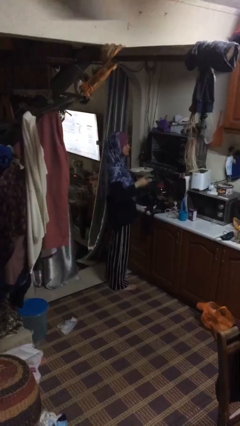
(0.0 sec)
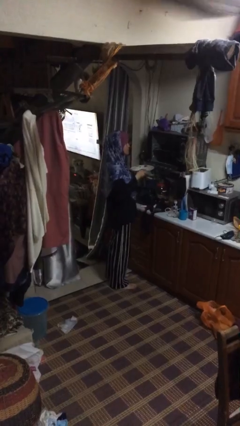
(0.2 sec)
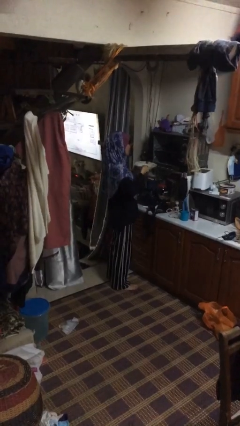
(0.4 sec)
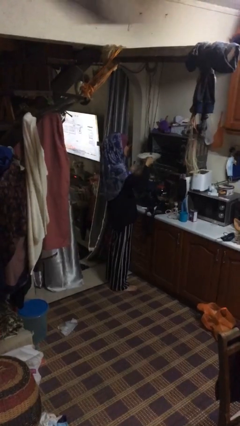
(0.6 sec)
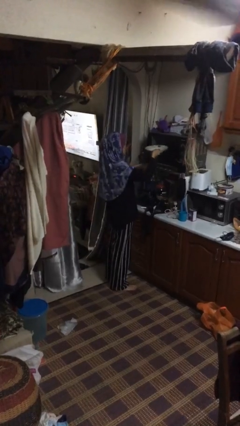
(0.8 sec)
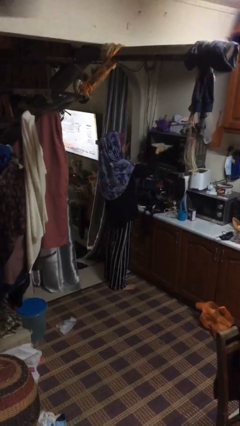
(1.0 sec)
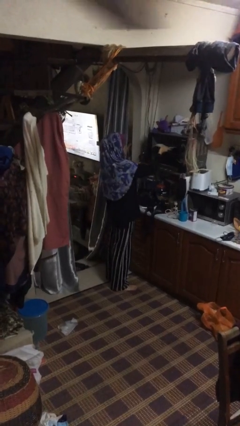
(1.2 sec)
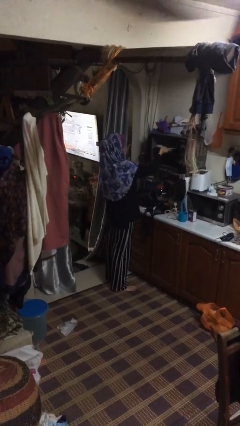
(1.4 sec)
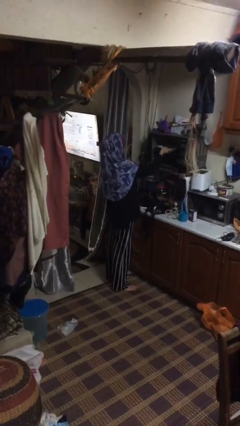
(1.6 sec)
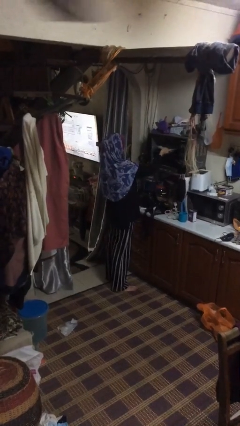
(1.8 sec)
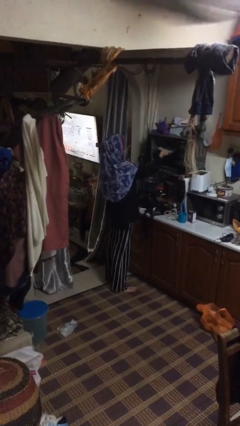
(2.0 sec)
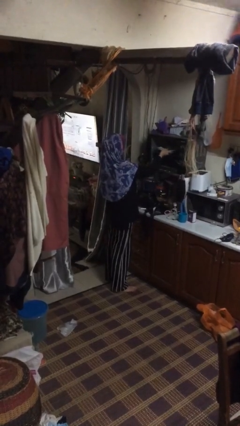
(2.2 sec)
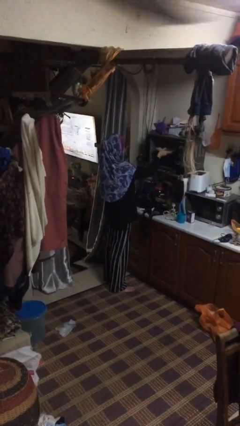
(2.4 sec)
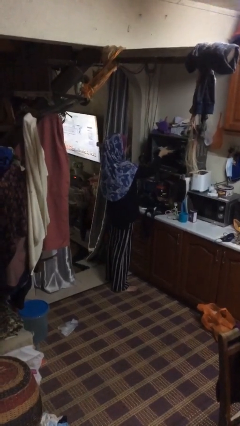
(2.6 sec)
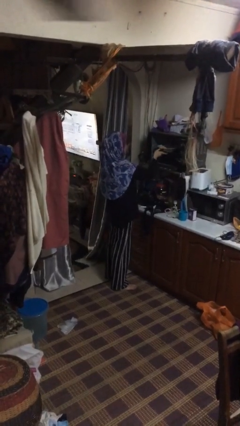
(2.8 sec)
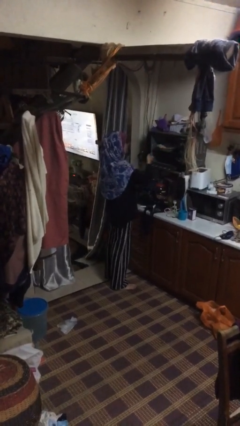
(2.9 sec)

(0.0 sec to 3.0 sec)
person puts object into oven

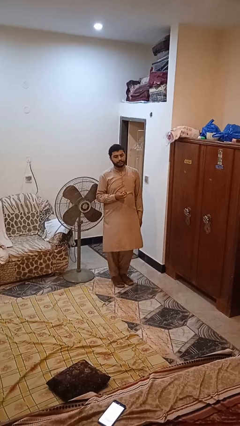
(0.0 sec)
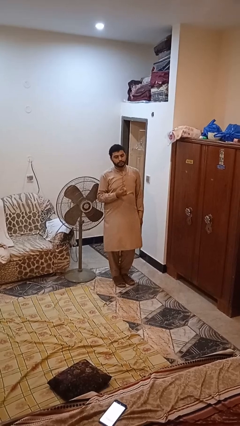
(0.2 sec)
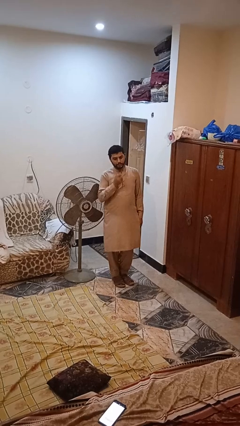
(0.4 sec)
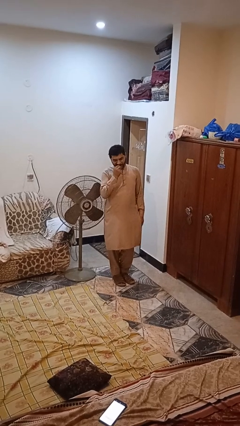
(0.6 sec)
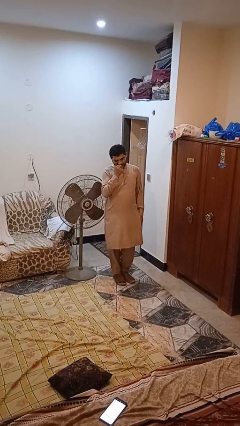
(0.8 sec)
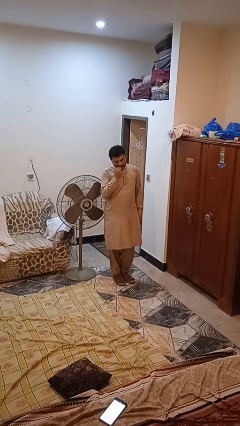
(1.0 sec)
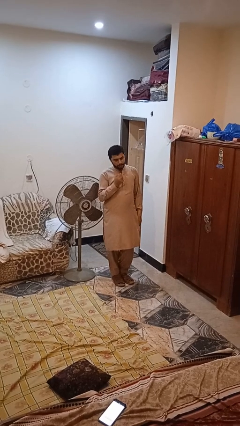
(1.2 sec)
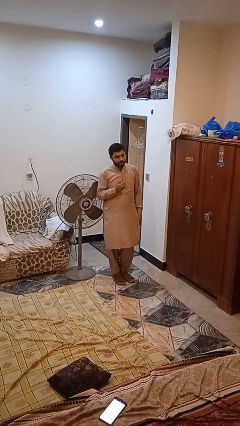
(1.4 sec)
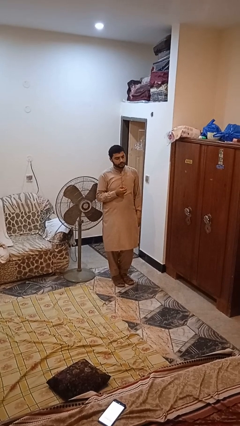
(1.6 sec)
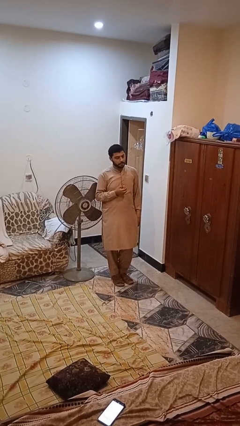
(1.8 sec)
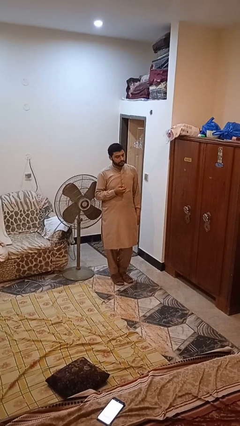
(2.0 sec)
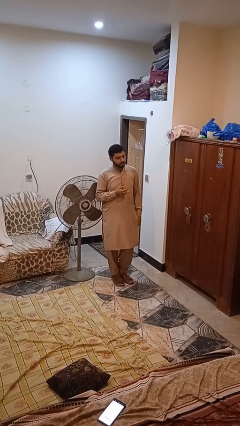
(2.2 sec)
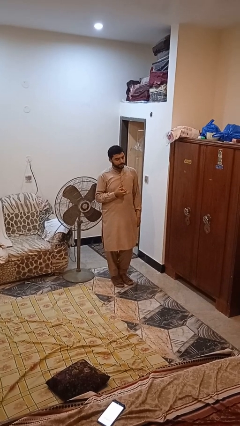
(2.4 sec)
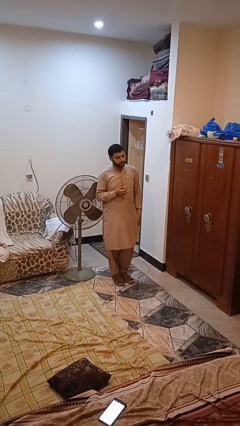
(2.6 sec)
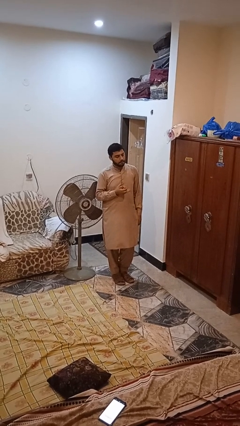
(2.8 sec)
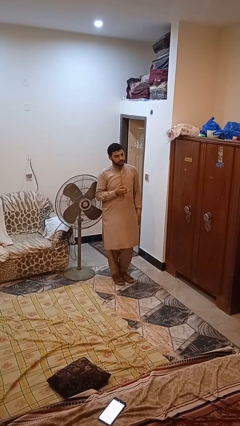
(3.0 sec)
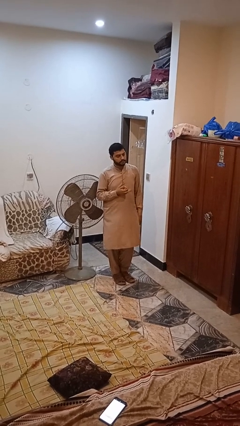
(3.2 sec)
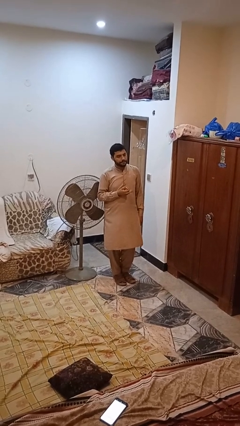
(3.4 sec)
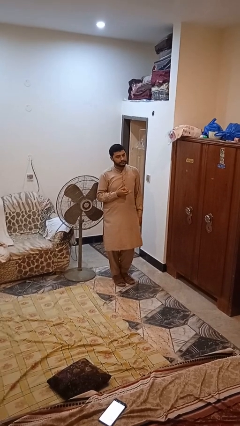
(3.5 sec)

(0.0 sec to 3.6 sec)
person eats apple

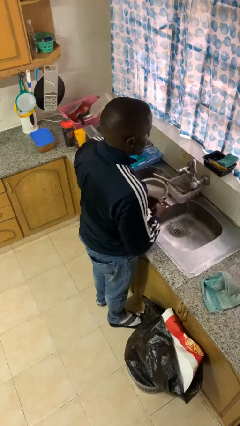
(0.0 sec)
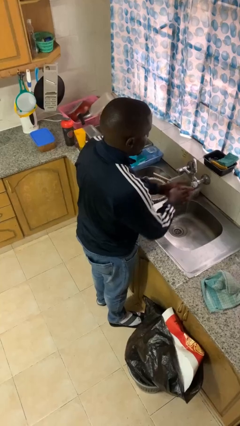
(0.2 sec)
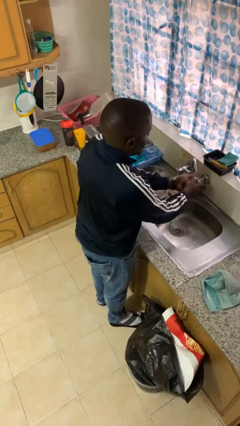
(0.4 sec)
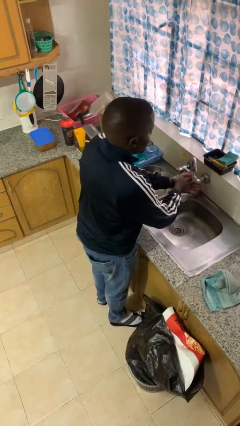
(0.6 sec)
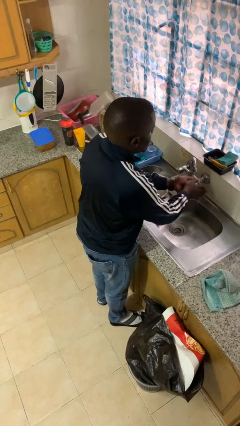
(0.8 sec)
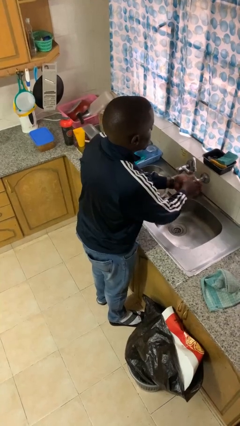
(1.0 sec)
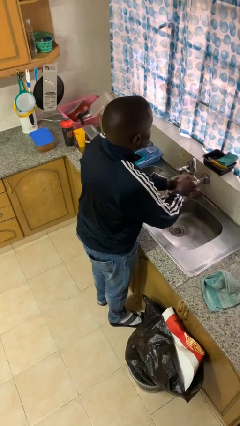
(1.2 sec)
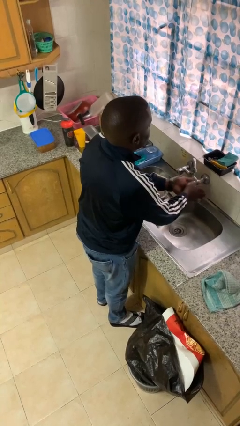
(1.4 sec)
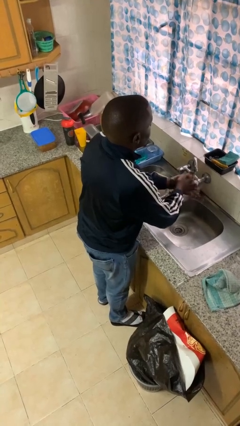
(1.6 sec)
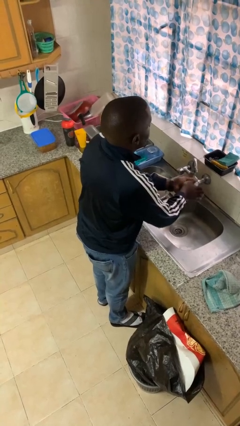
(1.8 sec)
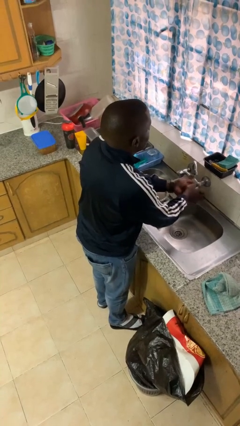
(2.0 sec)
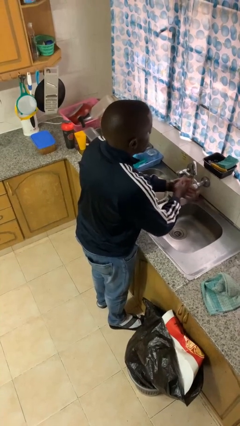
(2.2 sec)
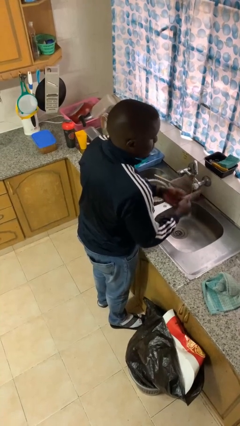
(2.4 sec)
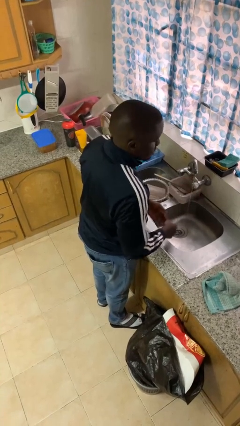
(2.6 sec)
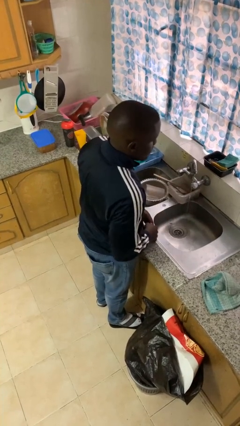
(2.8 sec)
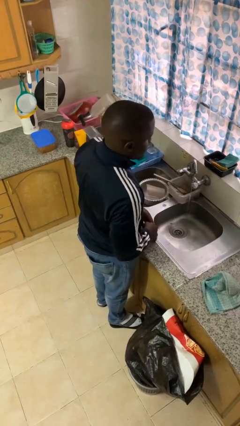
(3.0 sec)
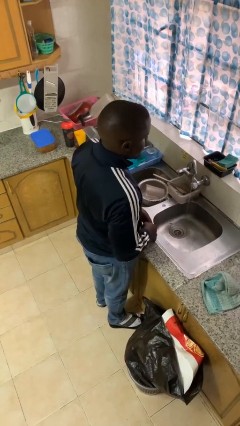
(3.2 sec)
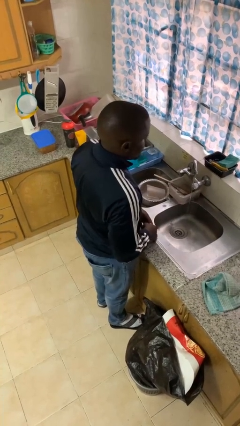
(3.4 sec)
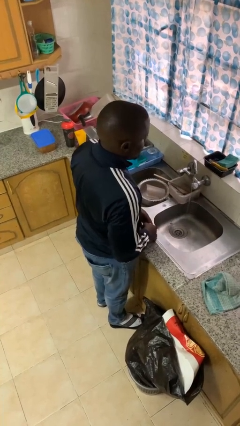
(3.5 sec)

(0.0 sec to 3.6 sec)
person washes hands

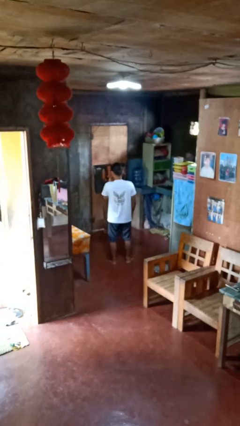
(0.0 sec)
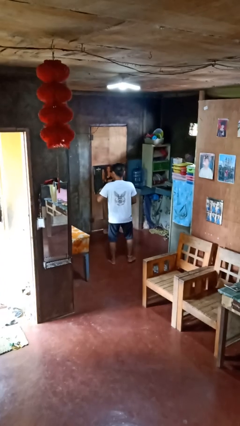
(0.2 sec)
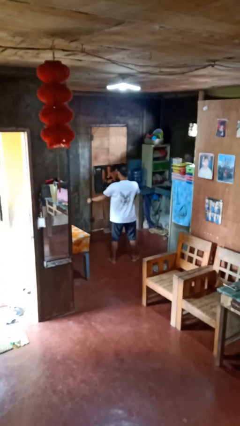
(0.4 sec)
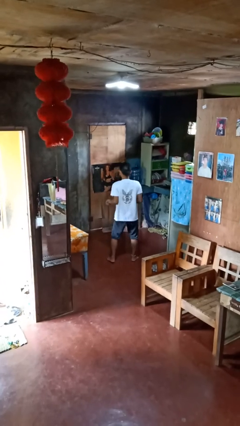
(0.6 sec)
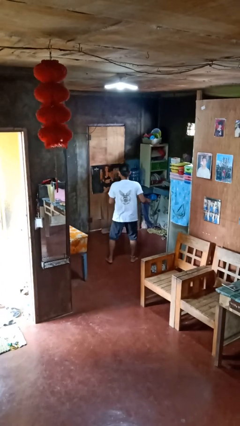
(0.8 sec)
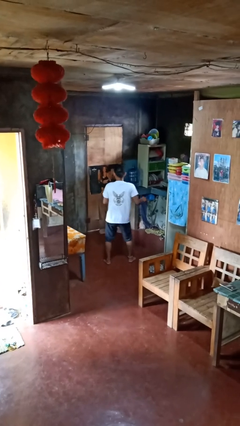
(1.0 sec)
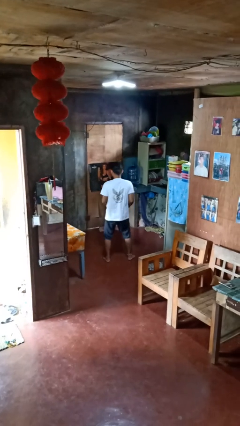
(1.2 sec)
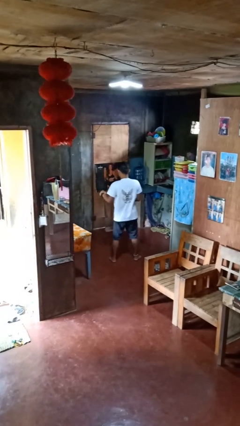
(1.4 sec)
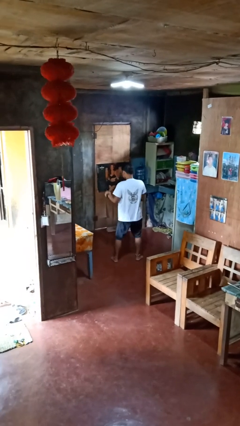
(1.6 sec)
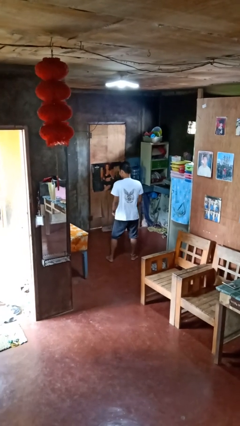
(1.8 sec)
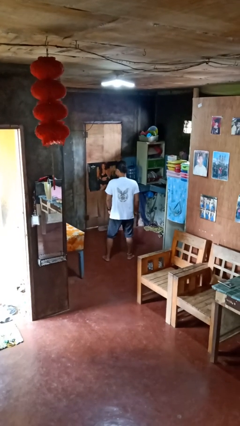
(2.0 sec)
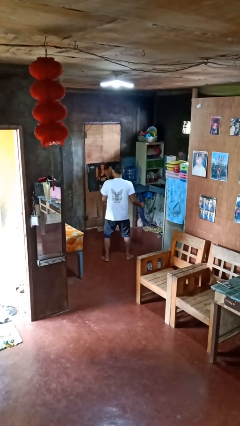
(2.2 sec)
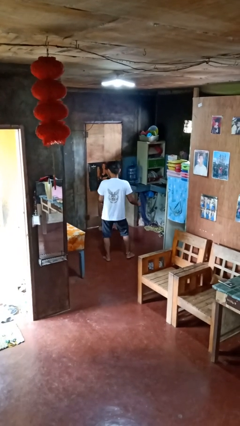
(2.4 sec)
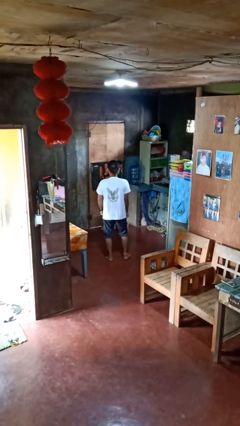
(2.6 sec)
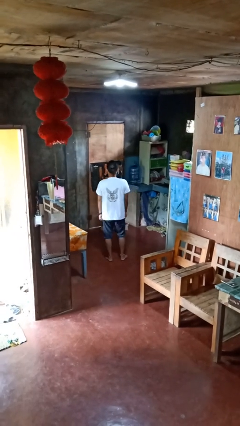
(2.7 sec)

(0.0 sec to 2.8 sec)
person dances in place

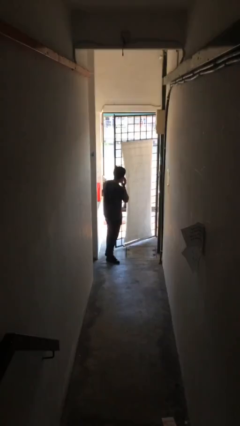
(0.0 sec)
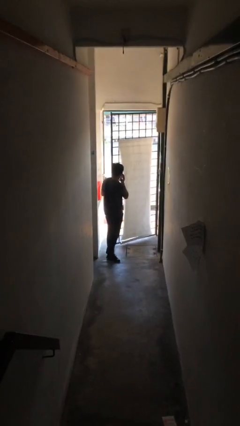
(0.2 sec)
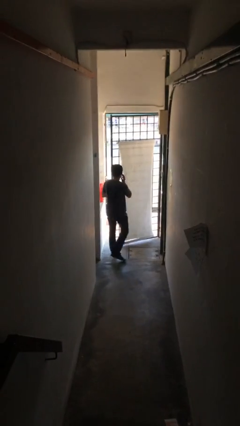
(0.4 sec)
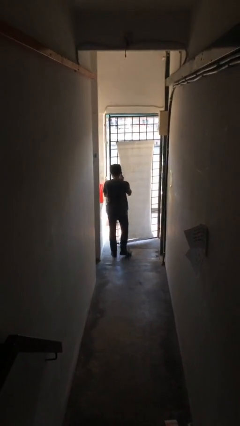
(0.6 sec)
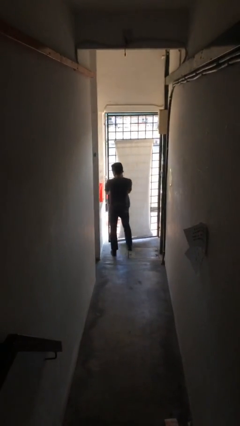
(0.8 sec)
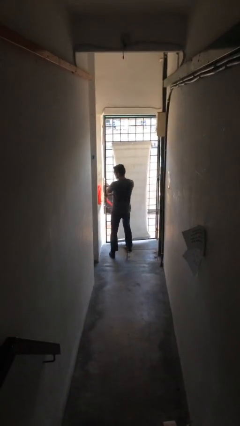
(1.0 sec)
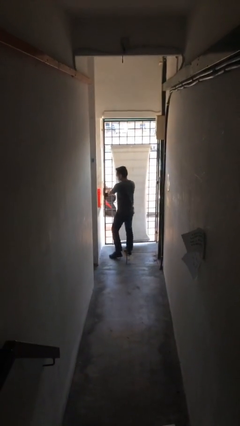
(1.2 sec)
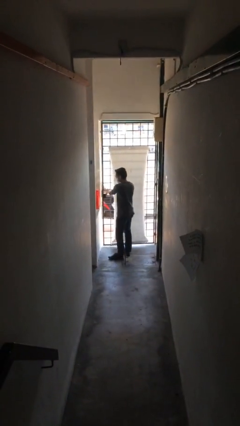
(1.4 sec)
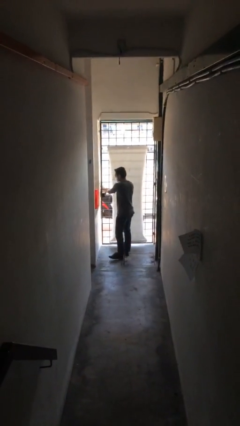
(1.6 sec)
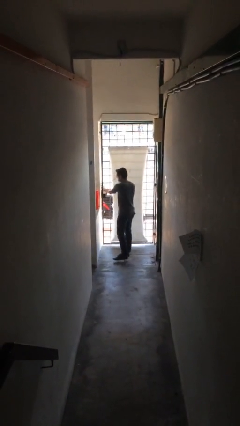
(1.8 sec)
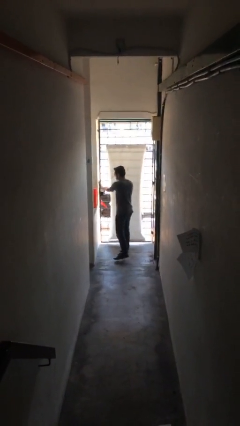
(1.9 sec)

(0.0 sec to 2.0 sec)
person closes facility door

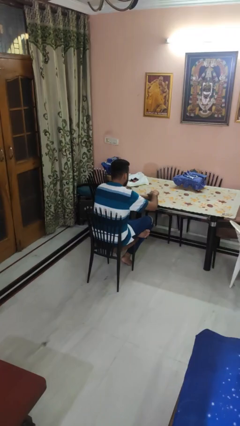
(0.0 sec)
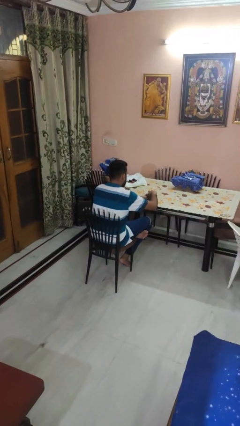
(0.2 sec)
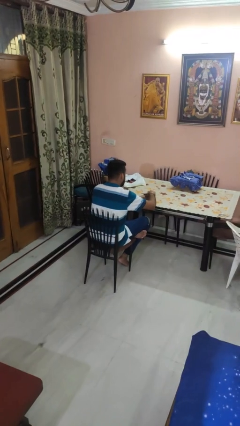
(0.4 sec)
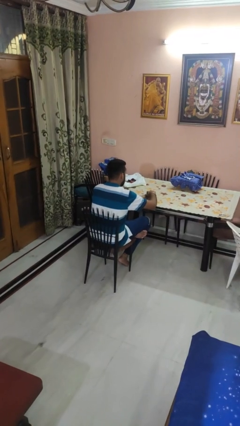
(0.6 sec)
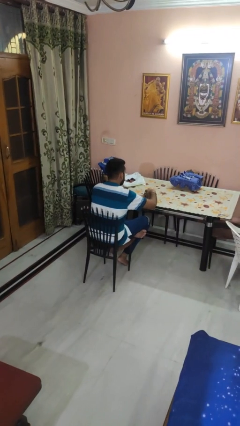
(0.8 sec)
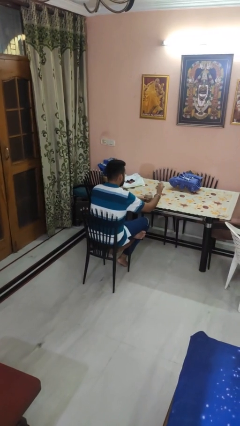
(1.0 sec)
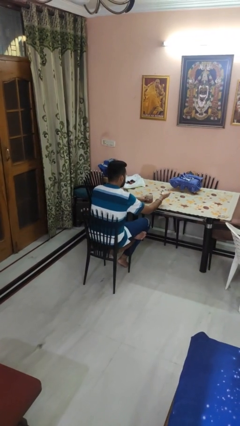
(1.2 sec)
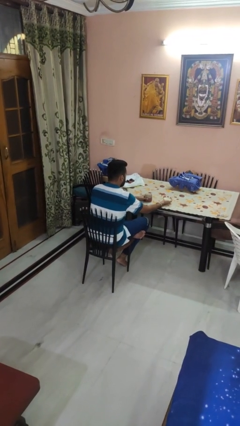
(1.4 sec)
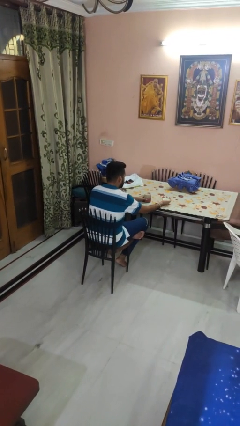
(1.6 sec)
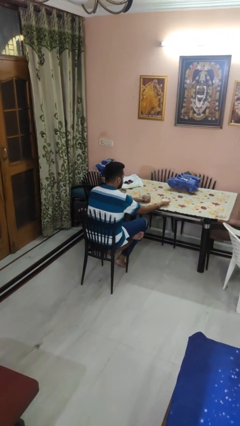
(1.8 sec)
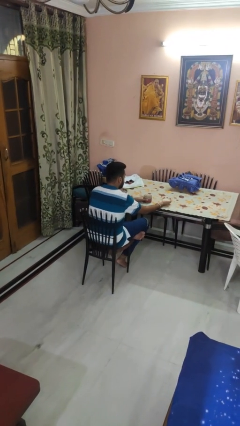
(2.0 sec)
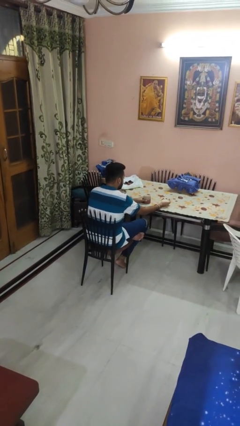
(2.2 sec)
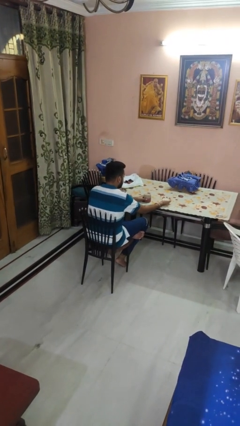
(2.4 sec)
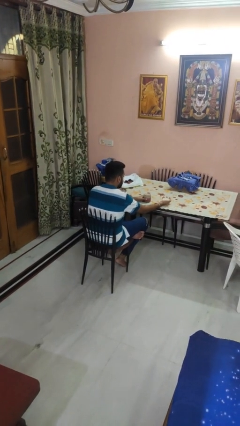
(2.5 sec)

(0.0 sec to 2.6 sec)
person opens jar
